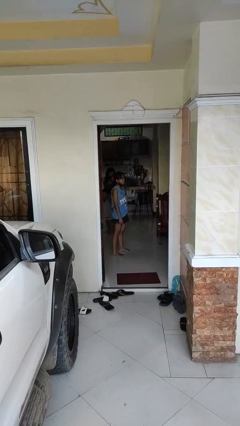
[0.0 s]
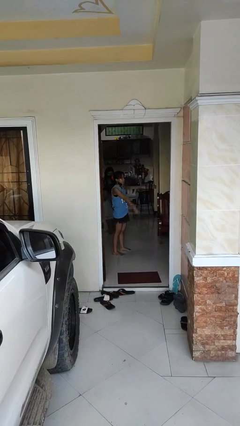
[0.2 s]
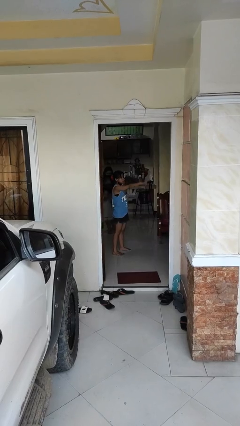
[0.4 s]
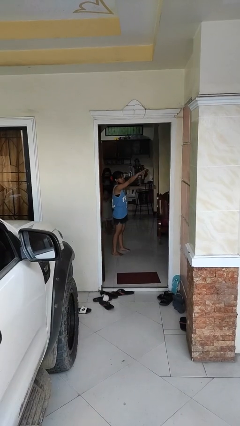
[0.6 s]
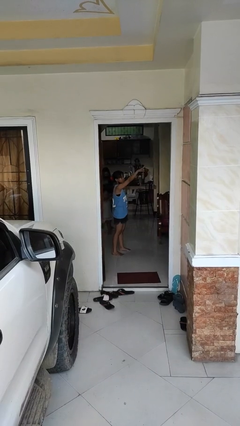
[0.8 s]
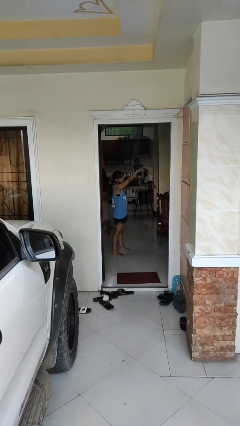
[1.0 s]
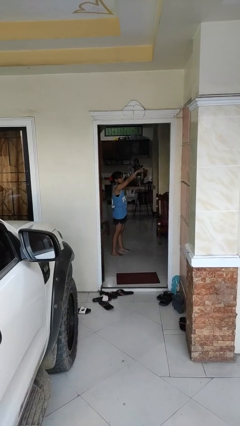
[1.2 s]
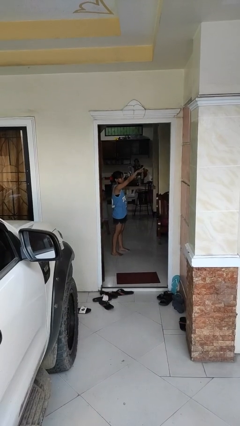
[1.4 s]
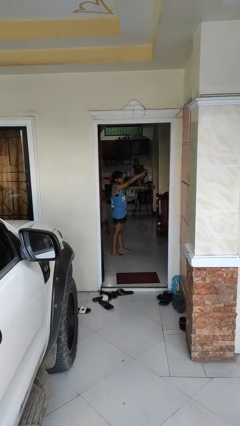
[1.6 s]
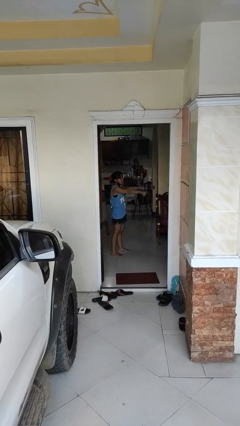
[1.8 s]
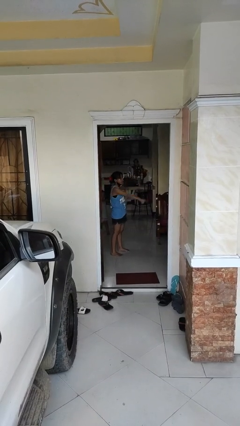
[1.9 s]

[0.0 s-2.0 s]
person points at person

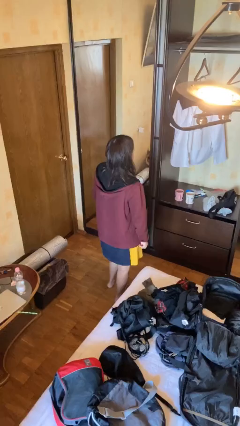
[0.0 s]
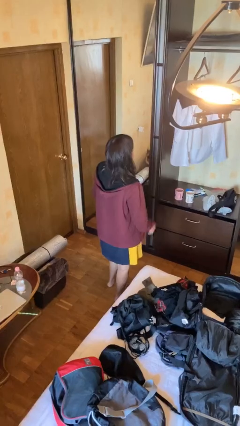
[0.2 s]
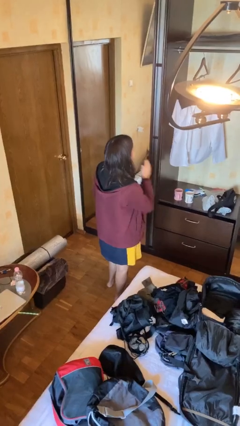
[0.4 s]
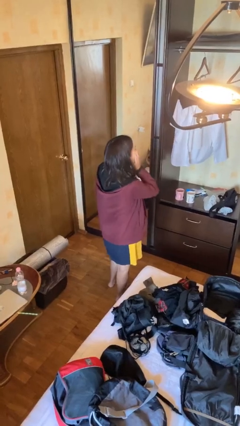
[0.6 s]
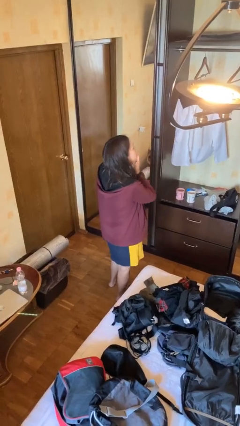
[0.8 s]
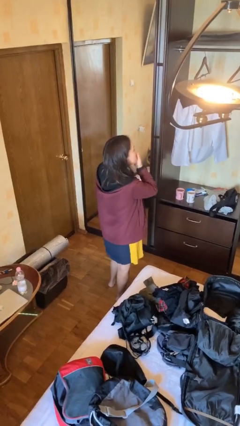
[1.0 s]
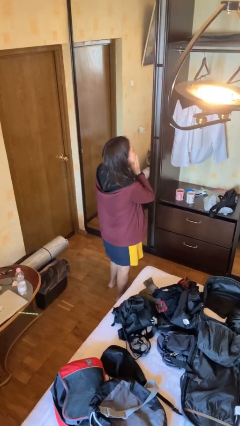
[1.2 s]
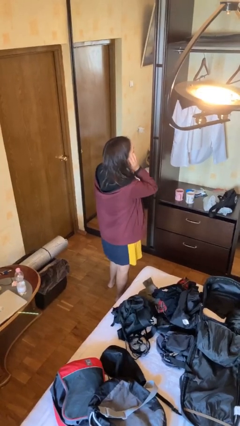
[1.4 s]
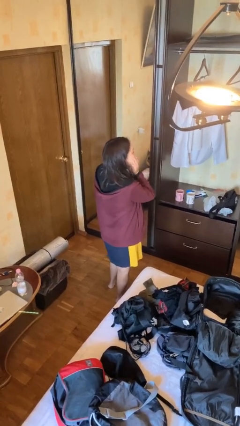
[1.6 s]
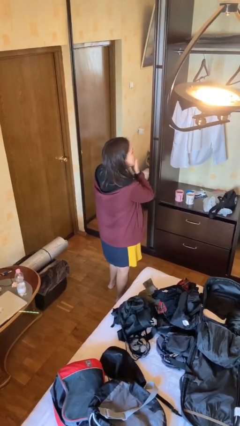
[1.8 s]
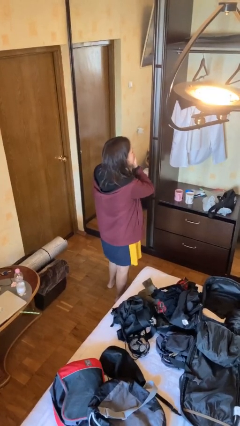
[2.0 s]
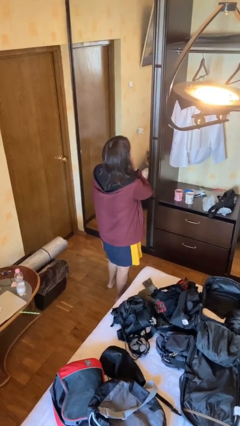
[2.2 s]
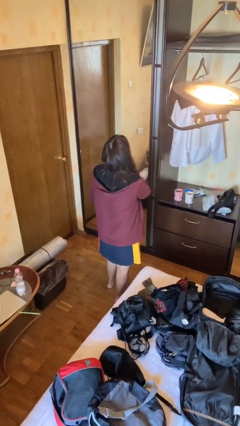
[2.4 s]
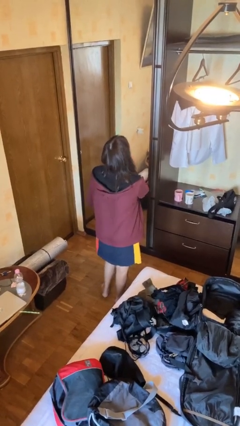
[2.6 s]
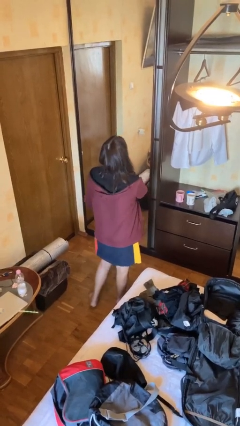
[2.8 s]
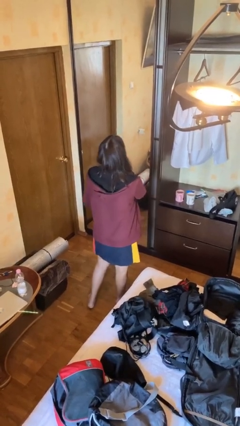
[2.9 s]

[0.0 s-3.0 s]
person scratches face

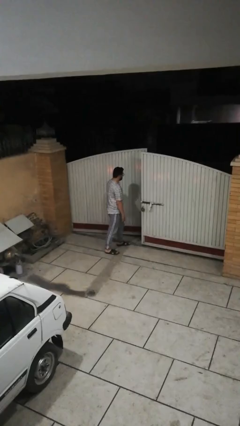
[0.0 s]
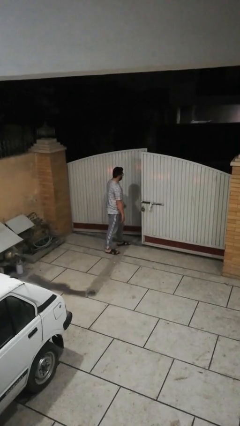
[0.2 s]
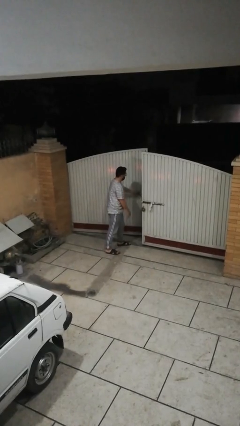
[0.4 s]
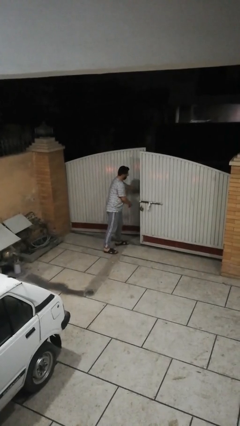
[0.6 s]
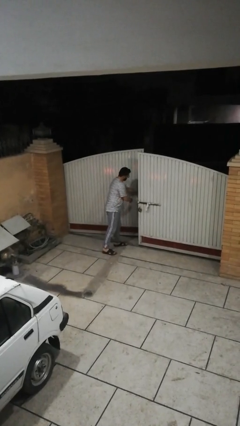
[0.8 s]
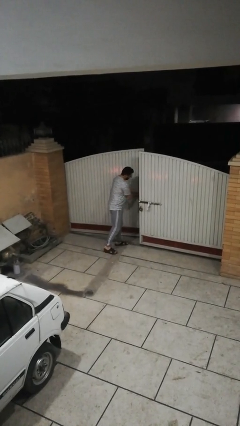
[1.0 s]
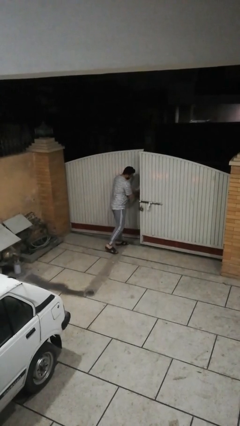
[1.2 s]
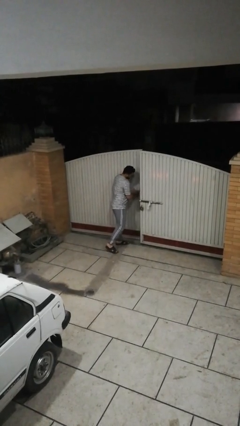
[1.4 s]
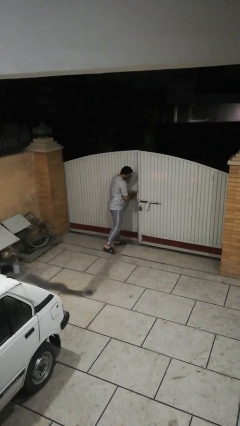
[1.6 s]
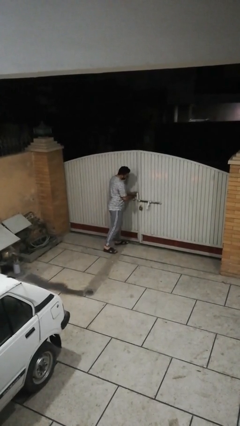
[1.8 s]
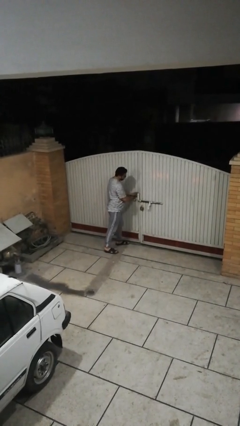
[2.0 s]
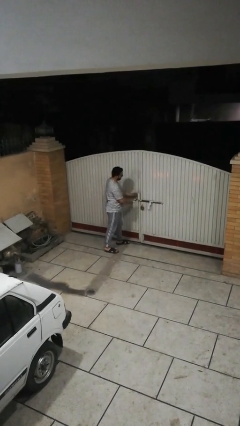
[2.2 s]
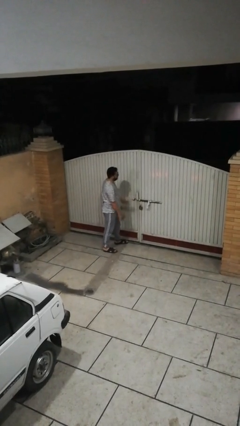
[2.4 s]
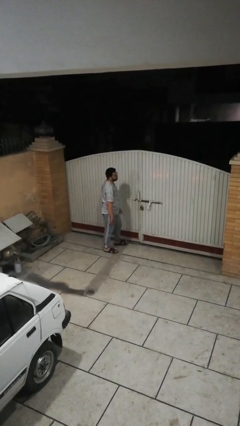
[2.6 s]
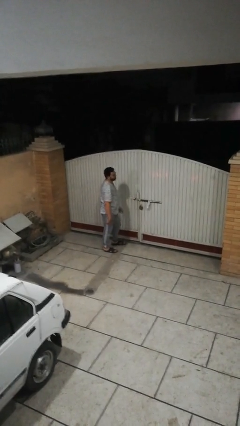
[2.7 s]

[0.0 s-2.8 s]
person closes facility door

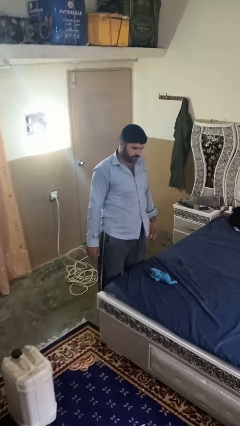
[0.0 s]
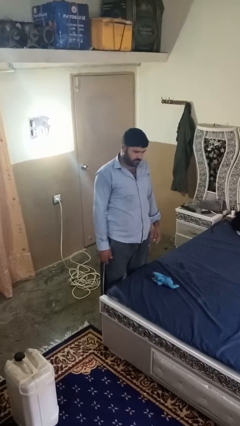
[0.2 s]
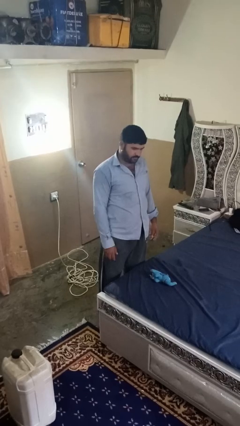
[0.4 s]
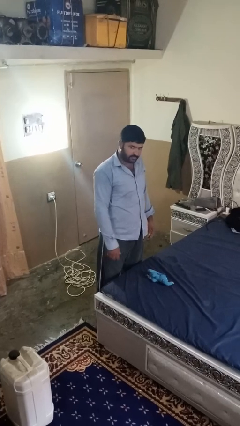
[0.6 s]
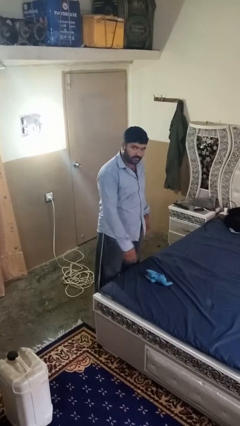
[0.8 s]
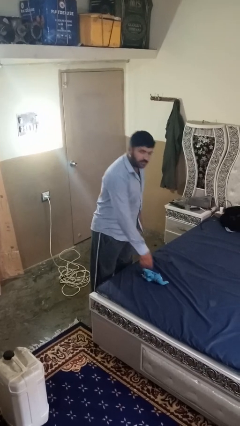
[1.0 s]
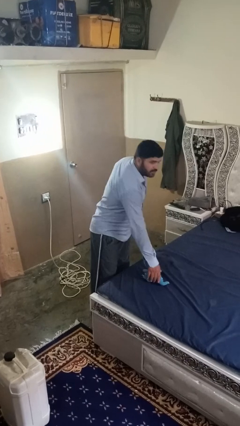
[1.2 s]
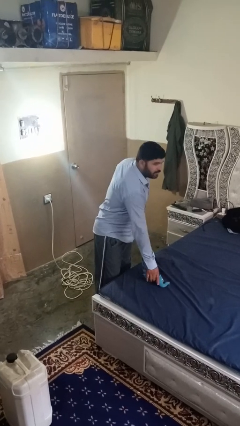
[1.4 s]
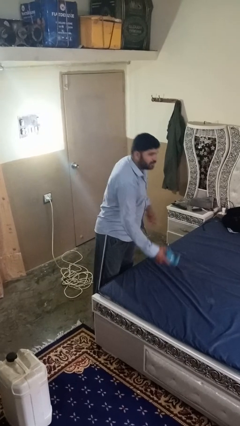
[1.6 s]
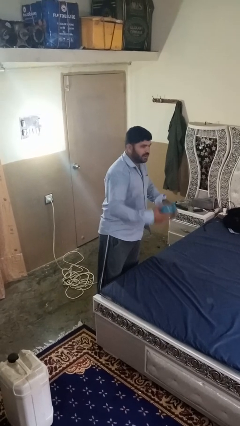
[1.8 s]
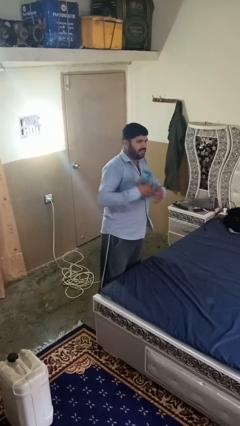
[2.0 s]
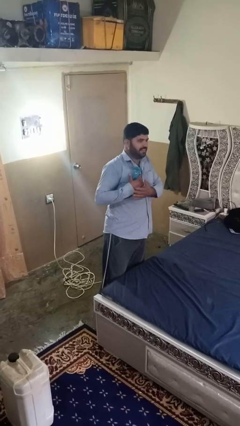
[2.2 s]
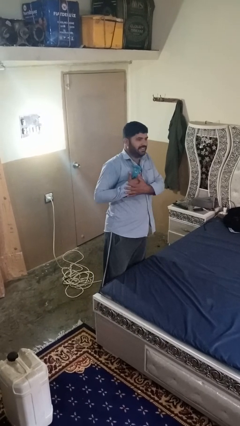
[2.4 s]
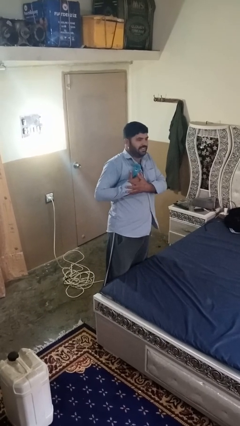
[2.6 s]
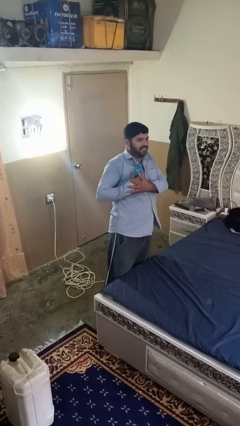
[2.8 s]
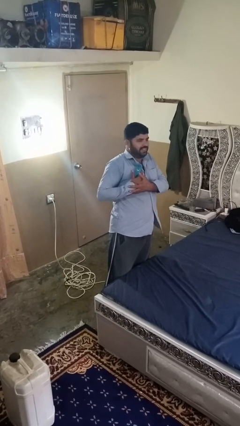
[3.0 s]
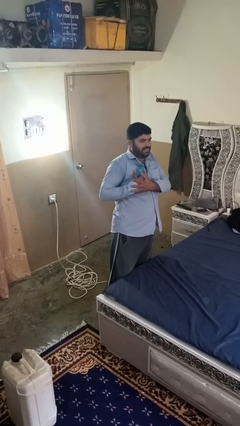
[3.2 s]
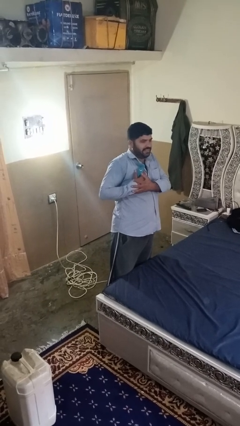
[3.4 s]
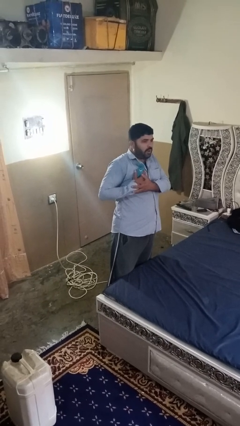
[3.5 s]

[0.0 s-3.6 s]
person hugs stuffed animal

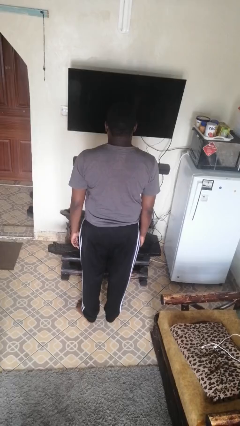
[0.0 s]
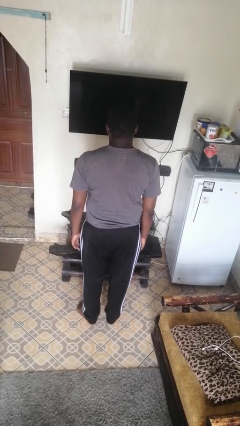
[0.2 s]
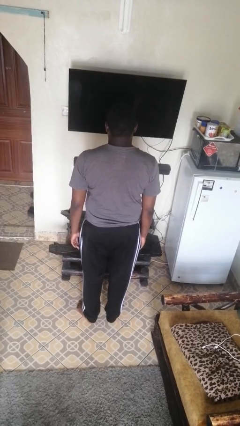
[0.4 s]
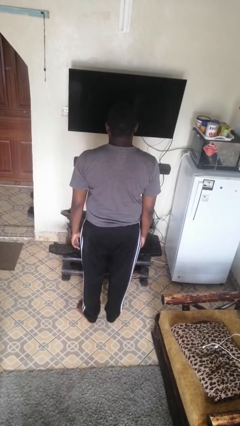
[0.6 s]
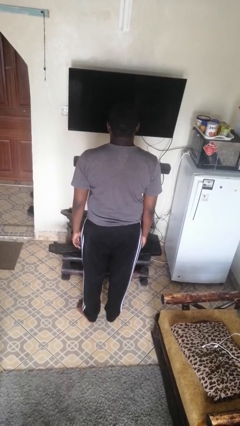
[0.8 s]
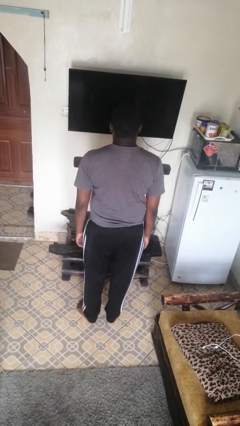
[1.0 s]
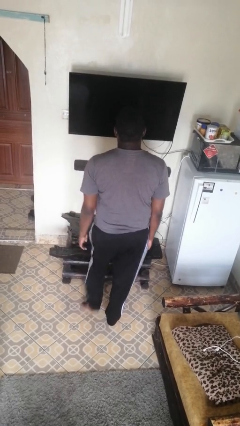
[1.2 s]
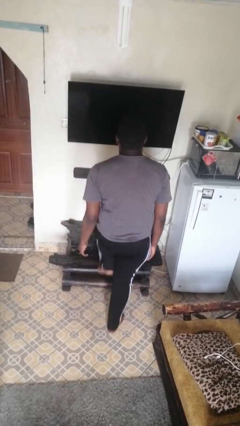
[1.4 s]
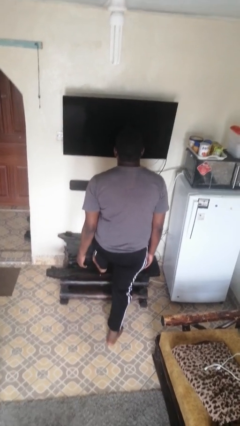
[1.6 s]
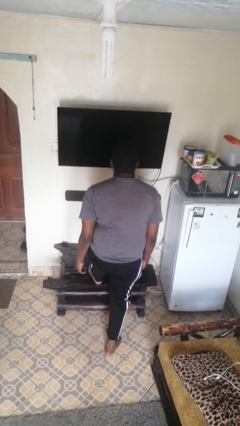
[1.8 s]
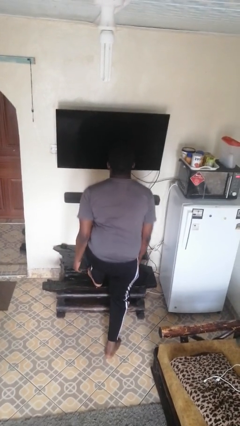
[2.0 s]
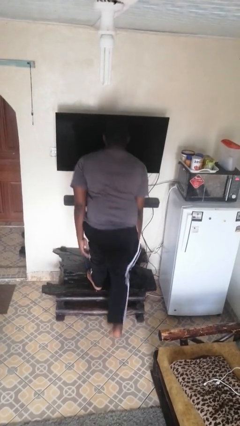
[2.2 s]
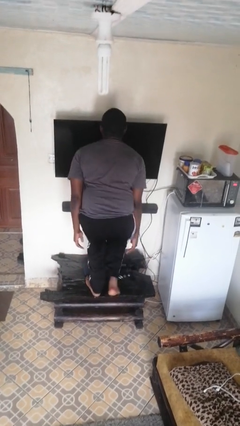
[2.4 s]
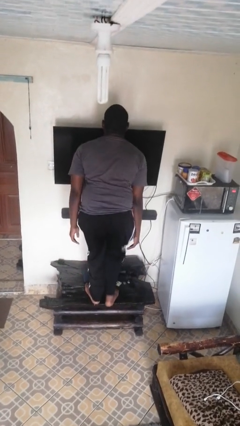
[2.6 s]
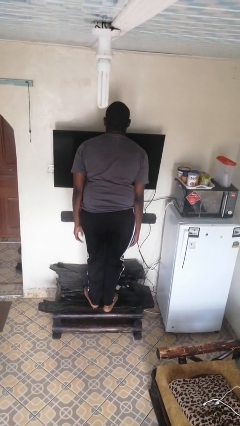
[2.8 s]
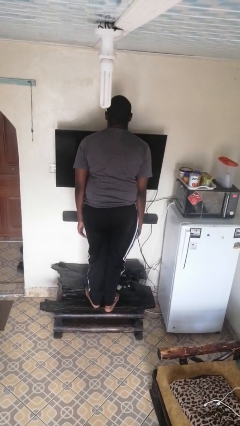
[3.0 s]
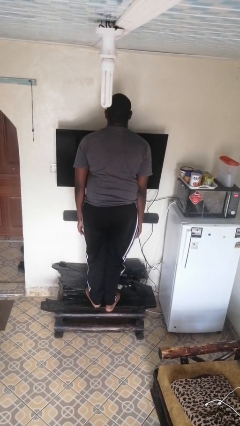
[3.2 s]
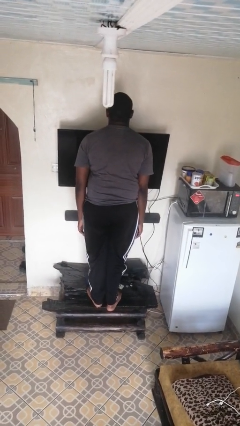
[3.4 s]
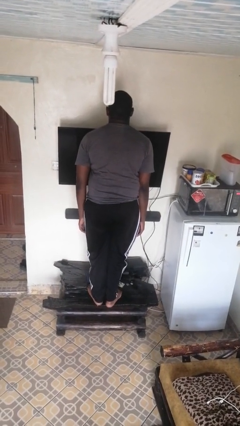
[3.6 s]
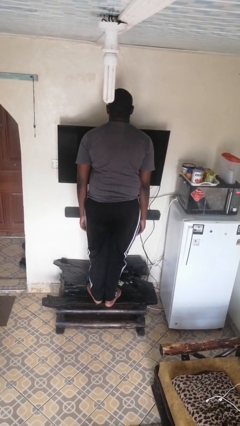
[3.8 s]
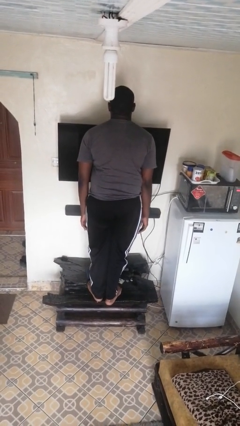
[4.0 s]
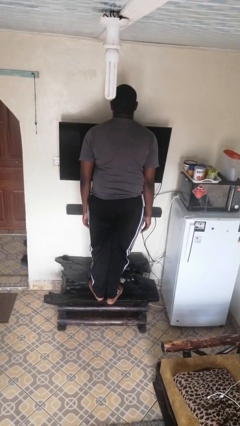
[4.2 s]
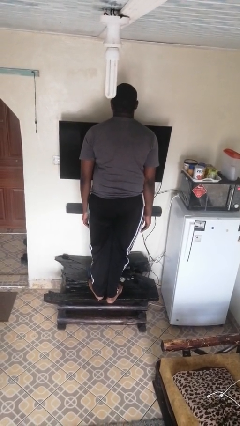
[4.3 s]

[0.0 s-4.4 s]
person climbs on table

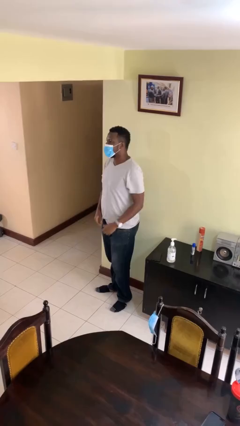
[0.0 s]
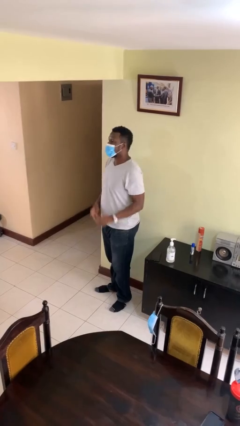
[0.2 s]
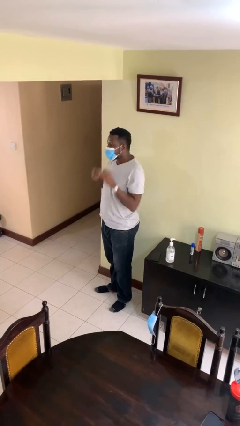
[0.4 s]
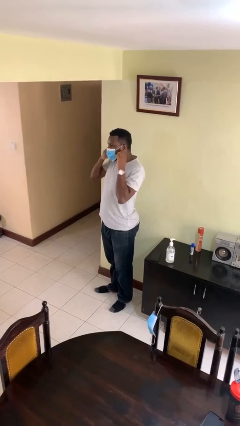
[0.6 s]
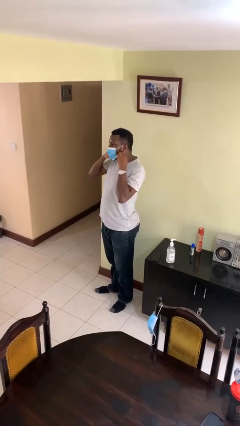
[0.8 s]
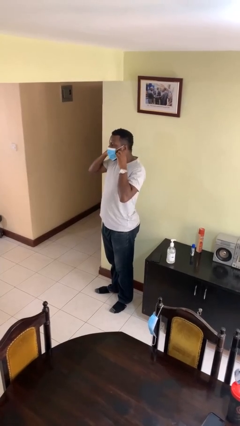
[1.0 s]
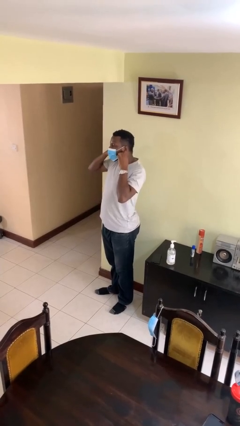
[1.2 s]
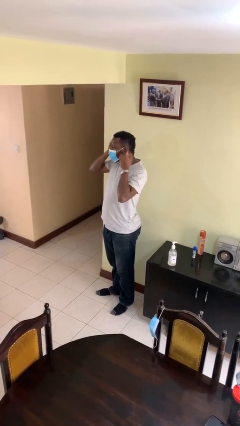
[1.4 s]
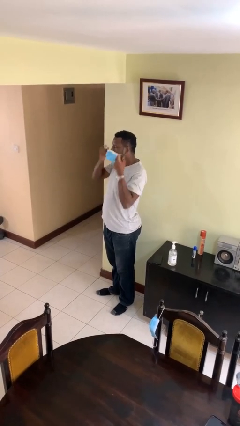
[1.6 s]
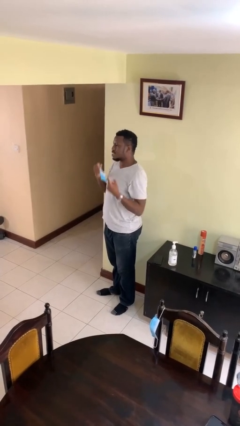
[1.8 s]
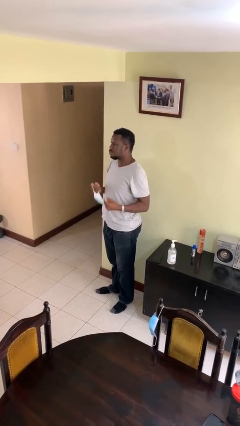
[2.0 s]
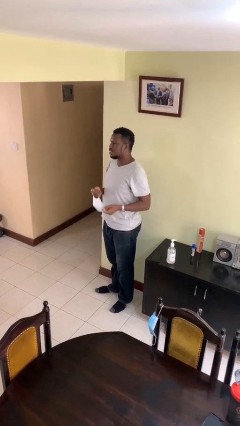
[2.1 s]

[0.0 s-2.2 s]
person takes off facemask
